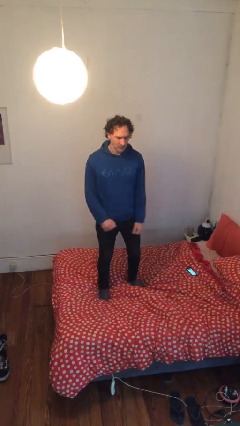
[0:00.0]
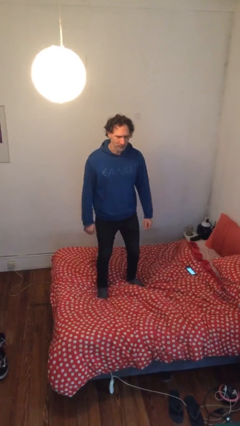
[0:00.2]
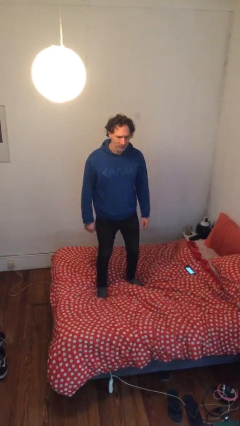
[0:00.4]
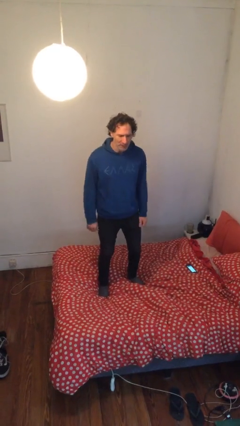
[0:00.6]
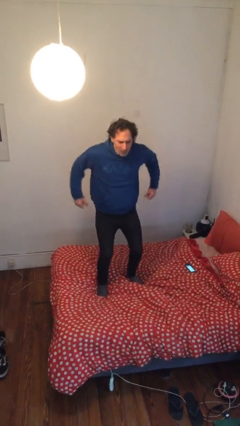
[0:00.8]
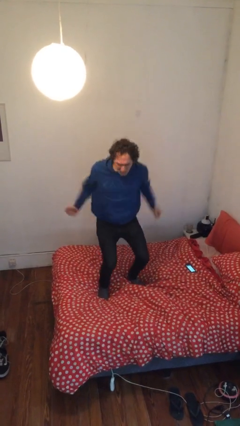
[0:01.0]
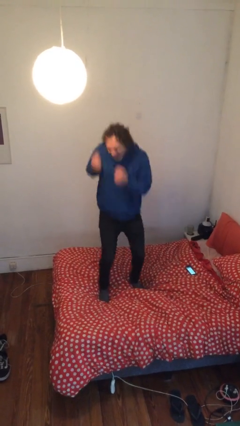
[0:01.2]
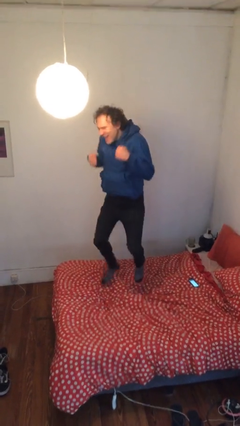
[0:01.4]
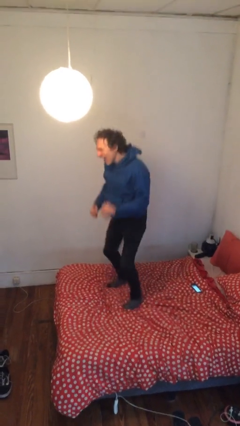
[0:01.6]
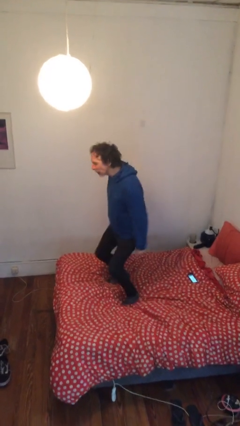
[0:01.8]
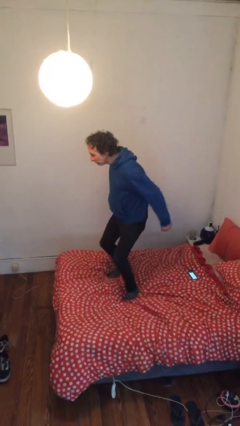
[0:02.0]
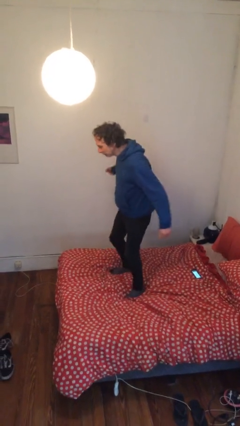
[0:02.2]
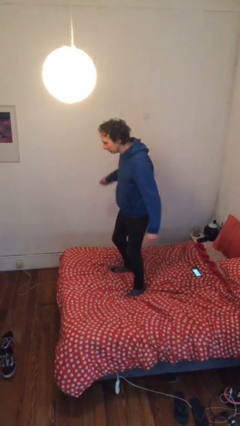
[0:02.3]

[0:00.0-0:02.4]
person jumps on bed

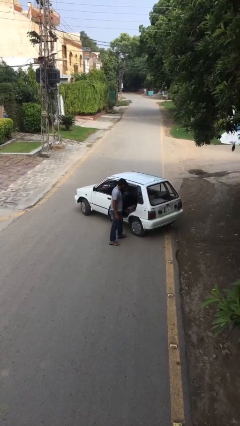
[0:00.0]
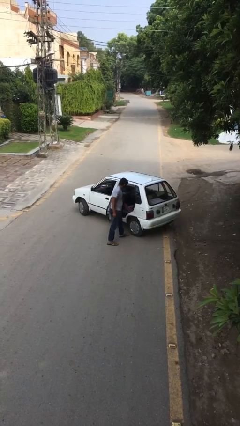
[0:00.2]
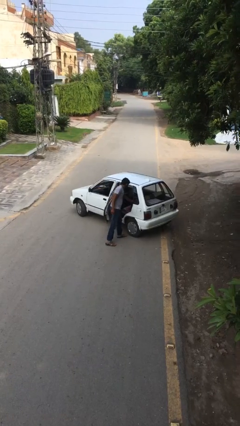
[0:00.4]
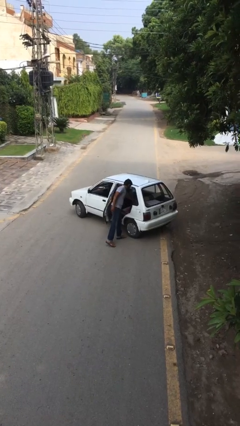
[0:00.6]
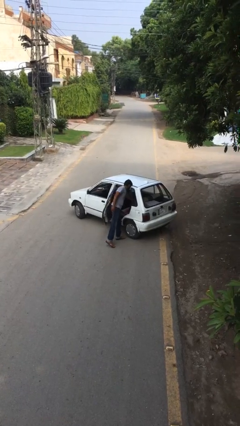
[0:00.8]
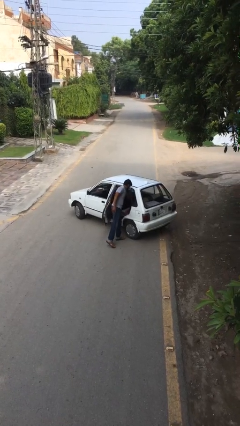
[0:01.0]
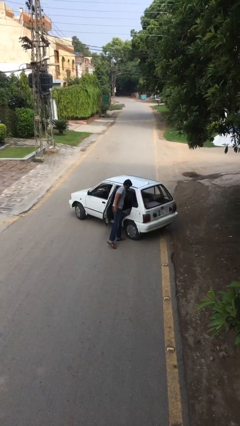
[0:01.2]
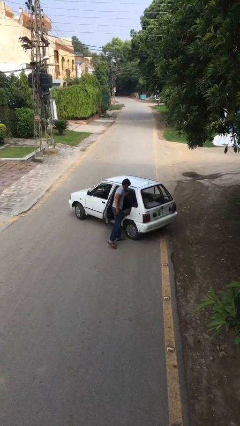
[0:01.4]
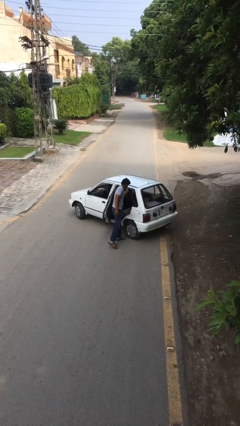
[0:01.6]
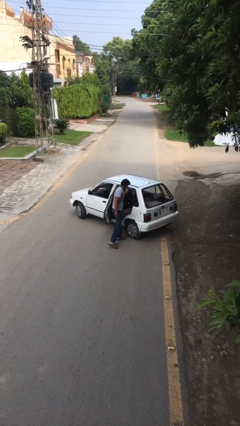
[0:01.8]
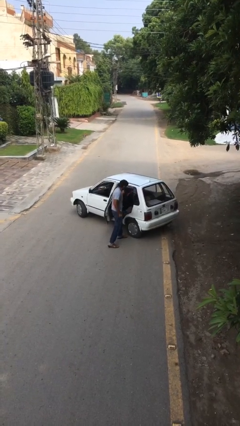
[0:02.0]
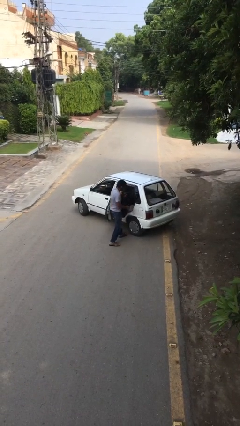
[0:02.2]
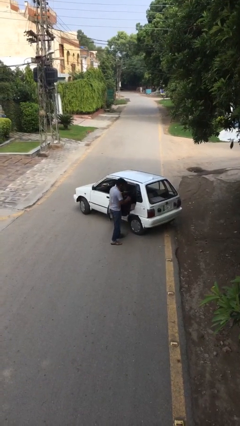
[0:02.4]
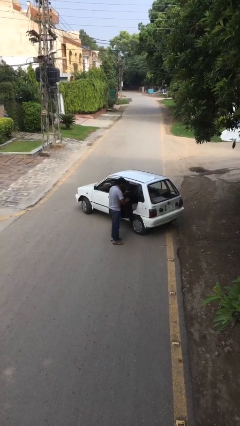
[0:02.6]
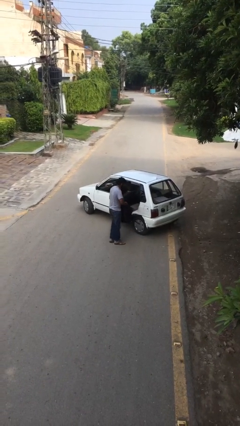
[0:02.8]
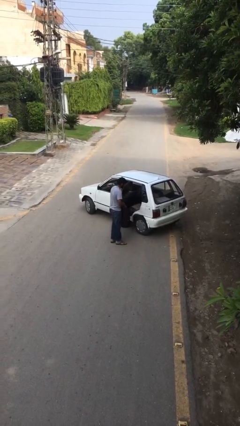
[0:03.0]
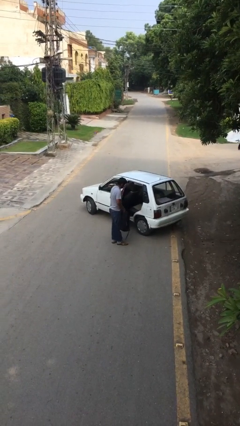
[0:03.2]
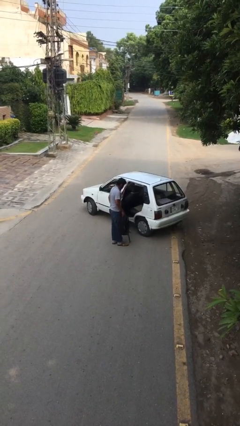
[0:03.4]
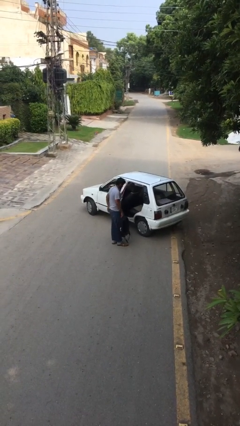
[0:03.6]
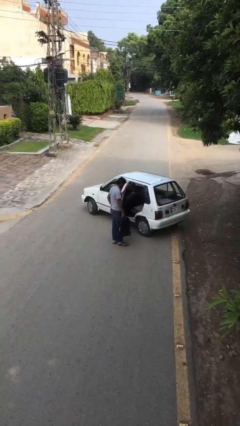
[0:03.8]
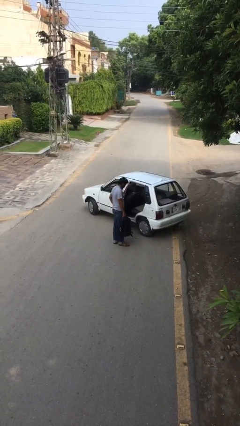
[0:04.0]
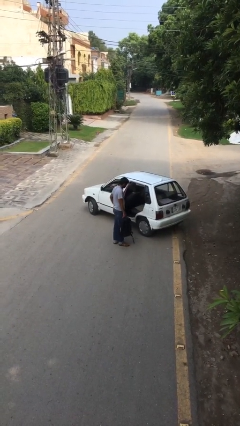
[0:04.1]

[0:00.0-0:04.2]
person unloads car

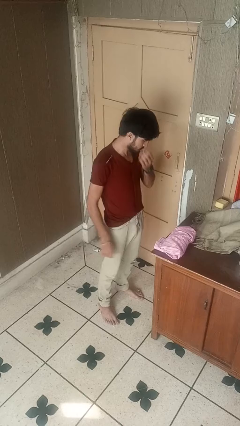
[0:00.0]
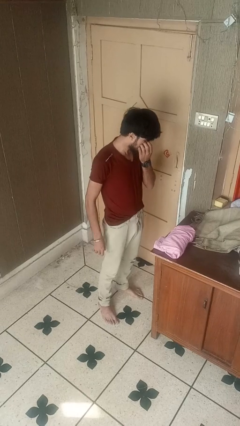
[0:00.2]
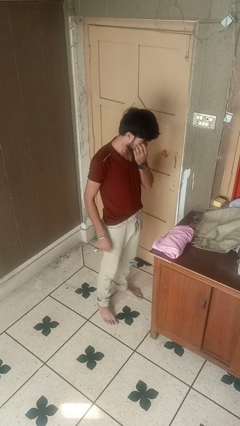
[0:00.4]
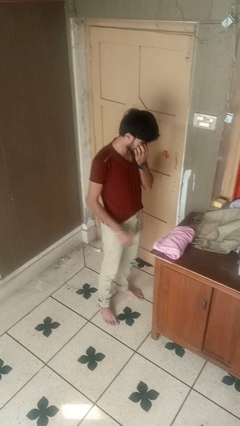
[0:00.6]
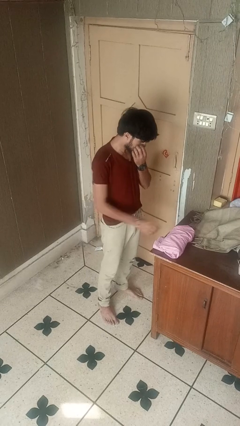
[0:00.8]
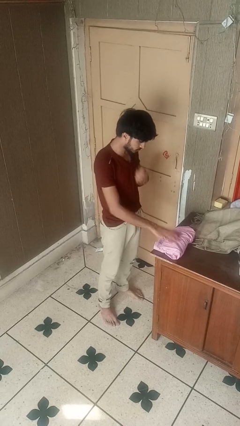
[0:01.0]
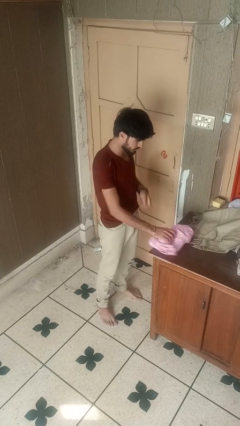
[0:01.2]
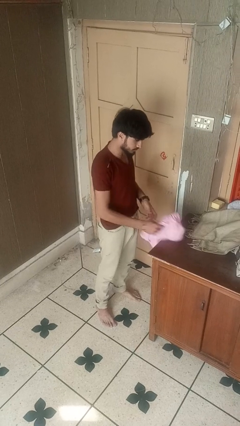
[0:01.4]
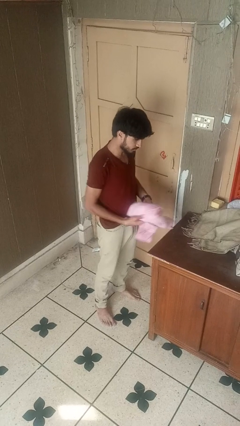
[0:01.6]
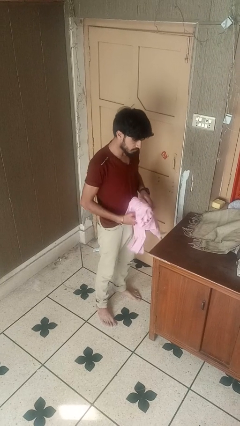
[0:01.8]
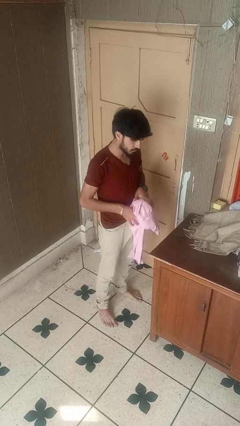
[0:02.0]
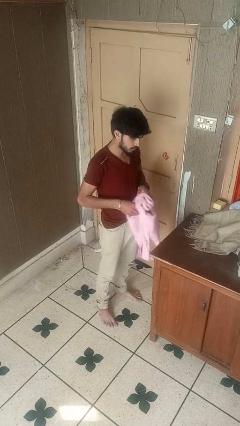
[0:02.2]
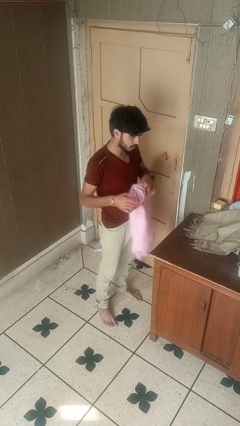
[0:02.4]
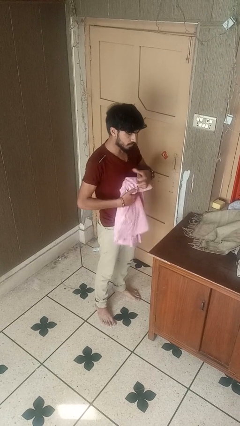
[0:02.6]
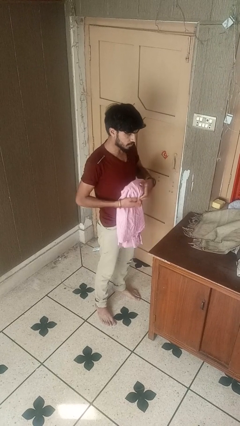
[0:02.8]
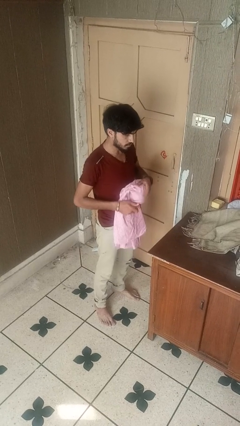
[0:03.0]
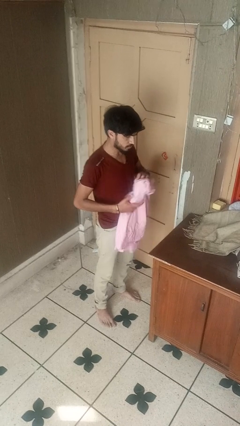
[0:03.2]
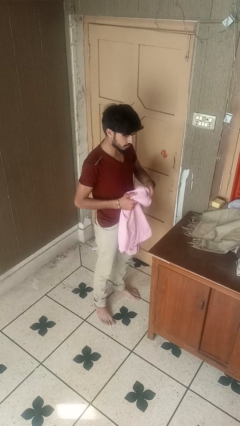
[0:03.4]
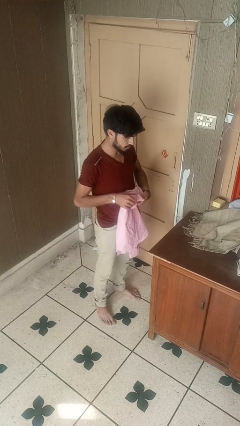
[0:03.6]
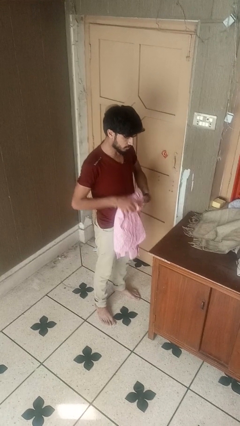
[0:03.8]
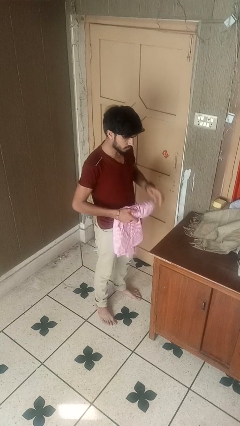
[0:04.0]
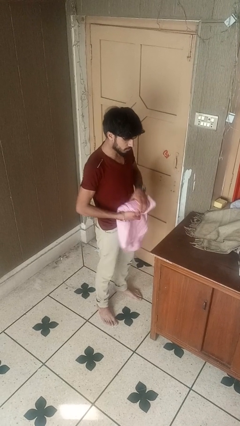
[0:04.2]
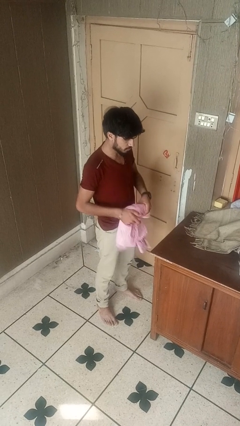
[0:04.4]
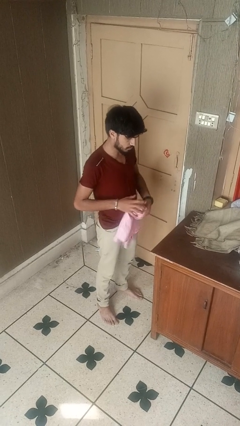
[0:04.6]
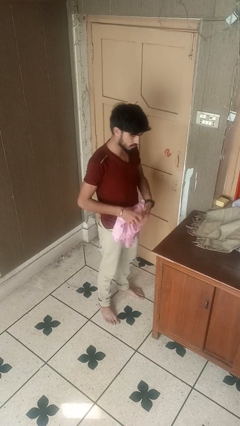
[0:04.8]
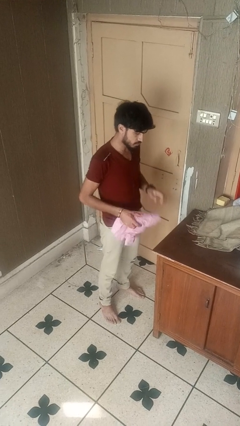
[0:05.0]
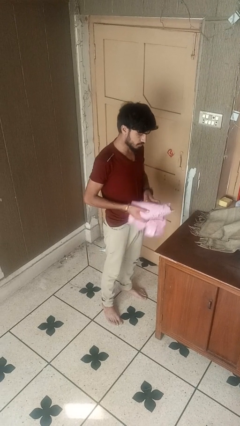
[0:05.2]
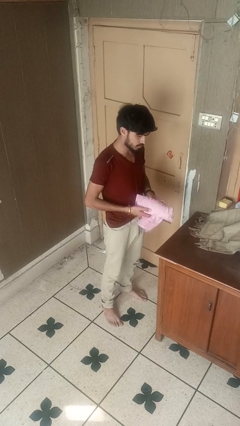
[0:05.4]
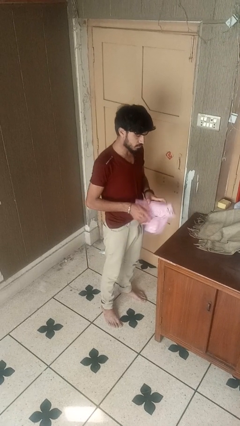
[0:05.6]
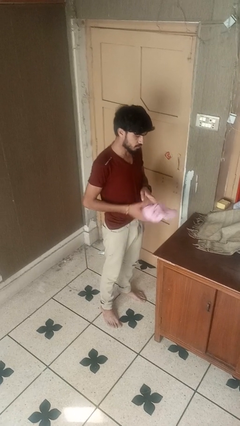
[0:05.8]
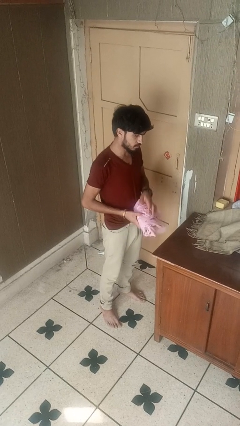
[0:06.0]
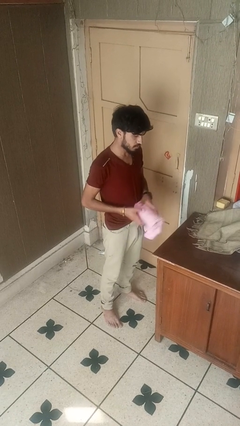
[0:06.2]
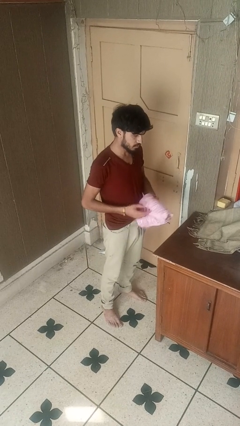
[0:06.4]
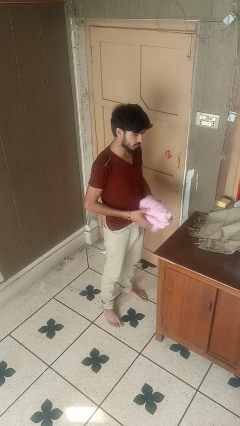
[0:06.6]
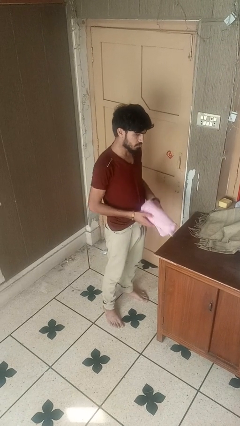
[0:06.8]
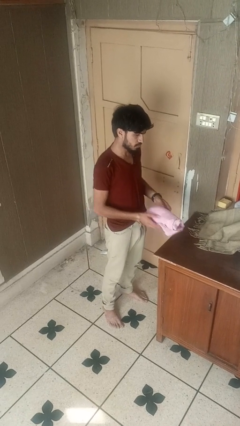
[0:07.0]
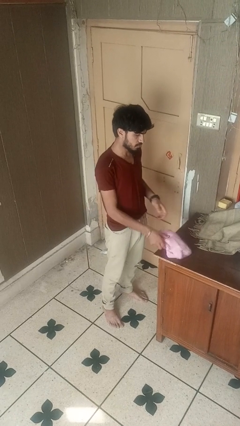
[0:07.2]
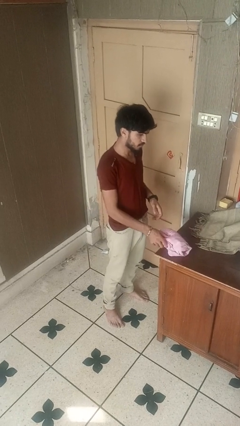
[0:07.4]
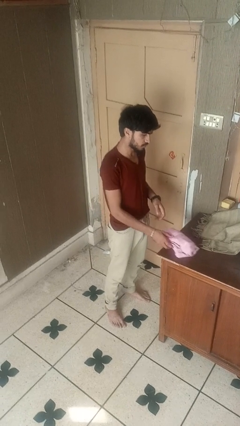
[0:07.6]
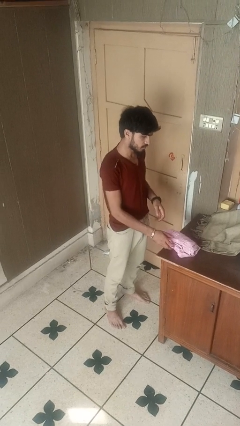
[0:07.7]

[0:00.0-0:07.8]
person folds shirt

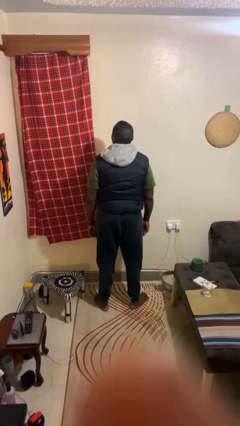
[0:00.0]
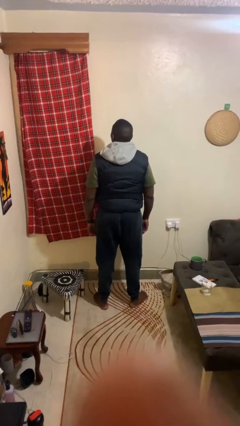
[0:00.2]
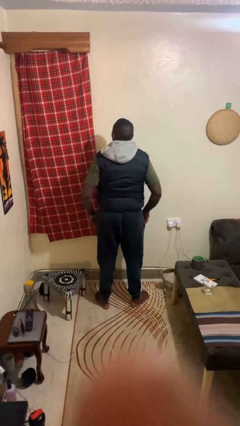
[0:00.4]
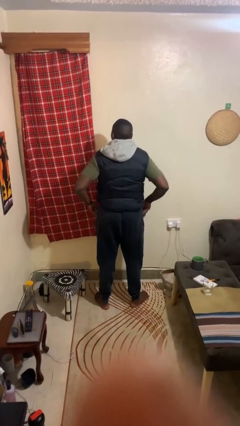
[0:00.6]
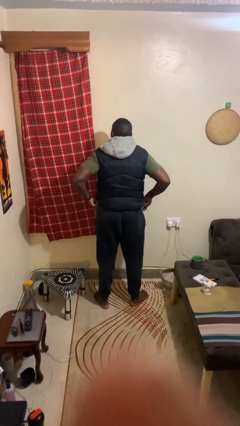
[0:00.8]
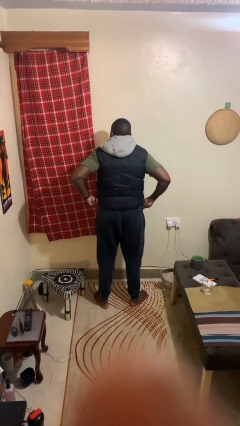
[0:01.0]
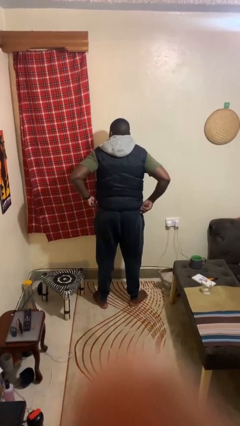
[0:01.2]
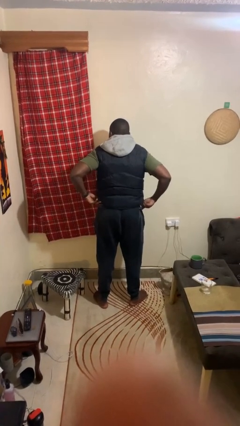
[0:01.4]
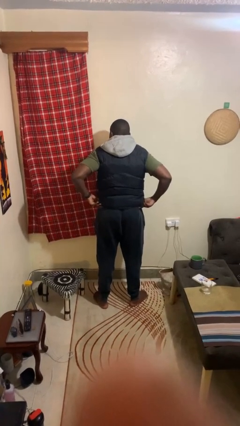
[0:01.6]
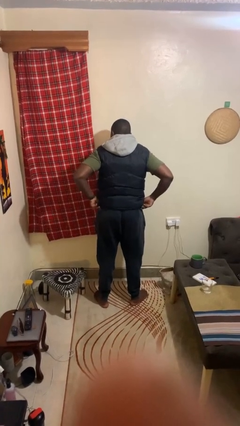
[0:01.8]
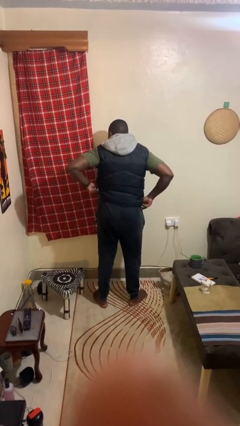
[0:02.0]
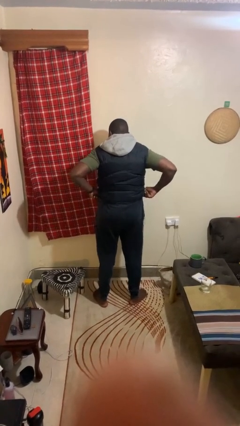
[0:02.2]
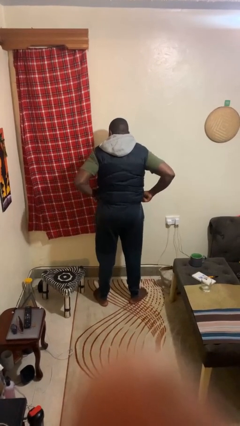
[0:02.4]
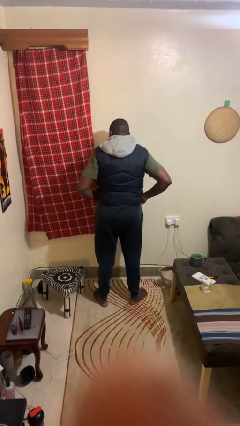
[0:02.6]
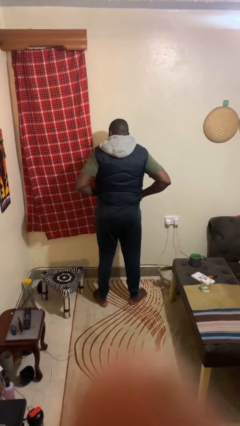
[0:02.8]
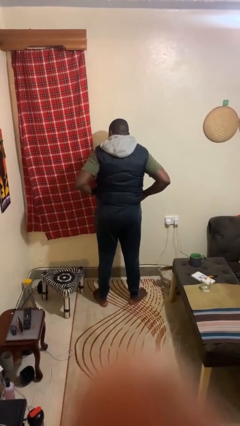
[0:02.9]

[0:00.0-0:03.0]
person hikes up pants

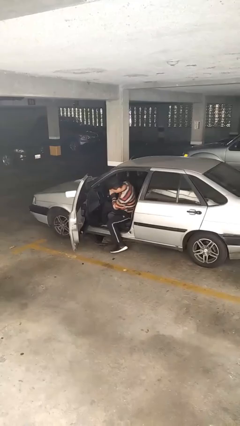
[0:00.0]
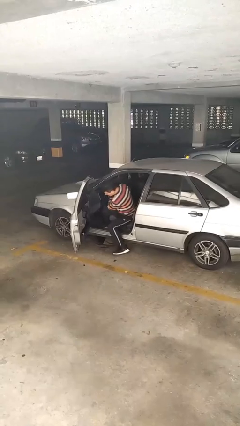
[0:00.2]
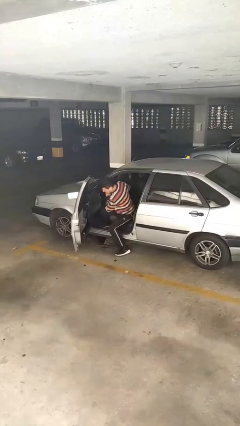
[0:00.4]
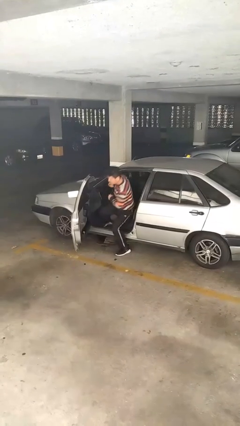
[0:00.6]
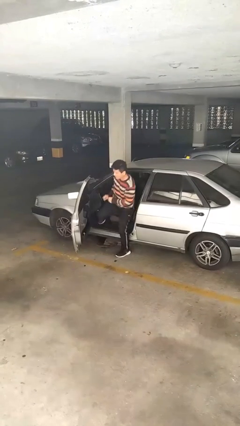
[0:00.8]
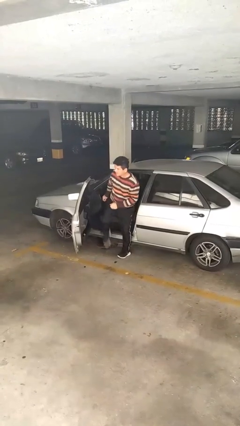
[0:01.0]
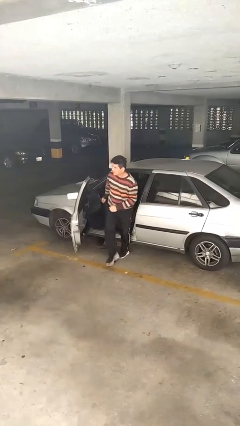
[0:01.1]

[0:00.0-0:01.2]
person exits car
